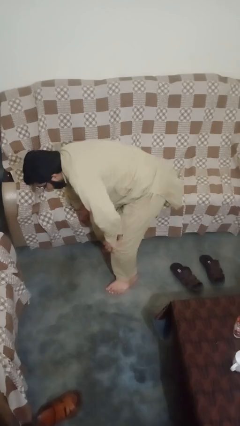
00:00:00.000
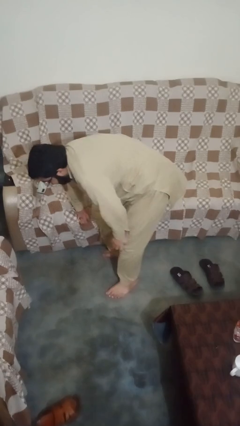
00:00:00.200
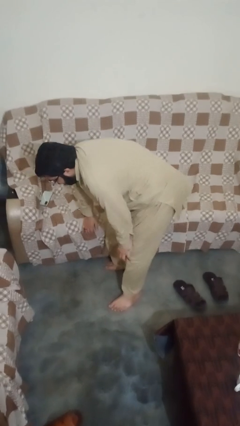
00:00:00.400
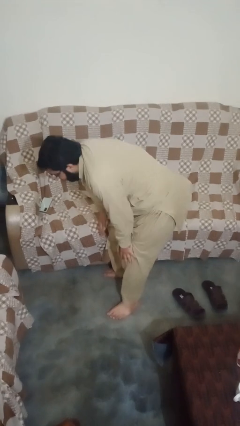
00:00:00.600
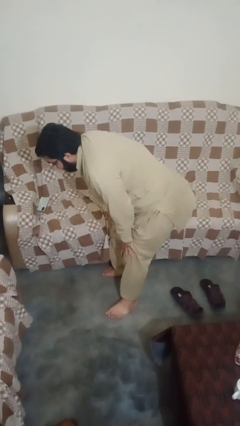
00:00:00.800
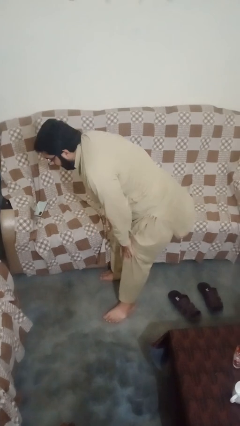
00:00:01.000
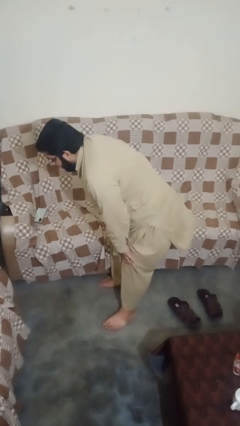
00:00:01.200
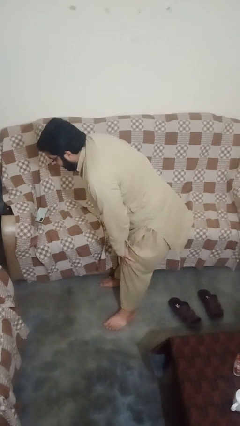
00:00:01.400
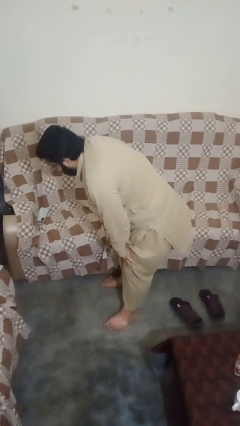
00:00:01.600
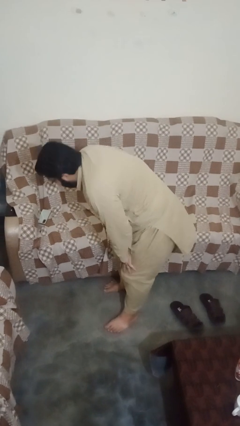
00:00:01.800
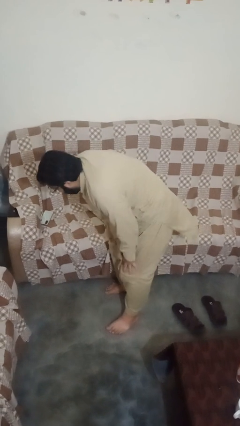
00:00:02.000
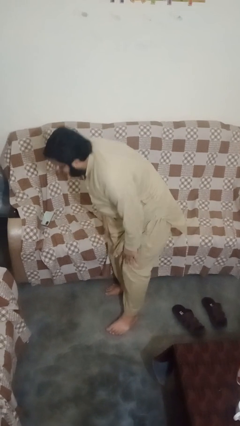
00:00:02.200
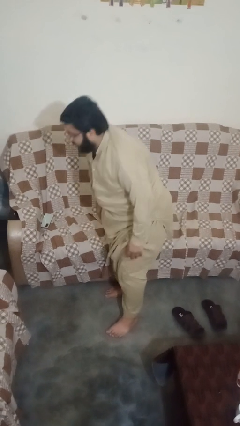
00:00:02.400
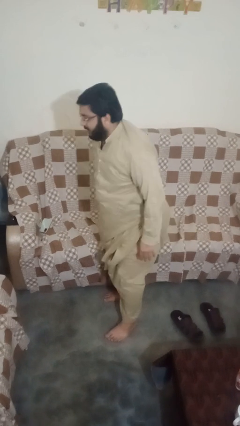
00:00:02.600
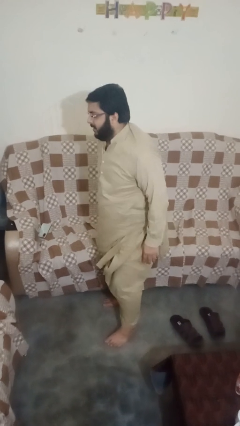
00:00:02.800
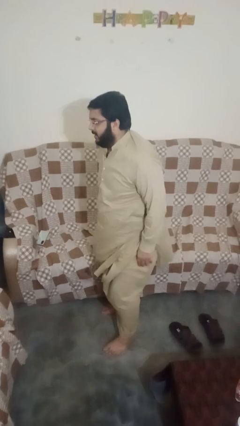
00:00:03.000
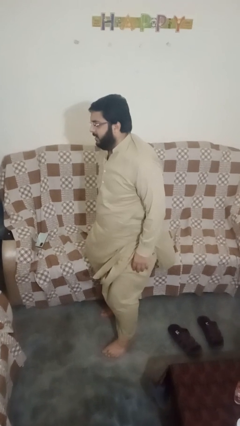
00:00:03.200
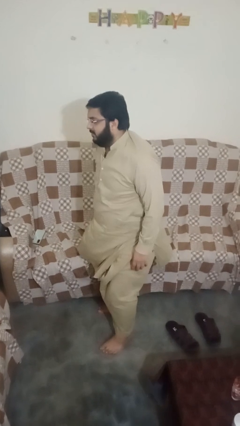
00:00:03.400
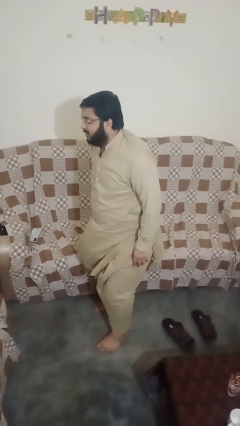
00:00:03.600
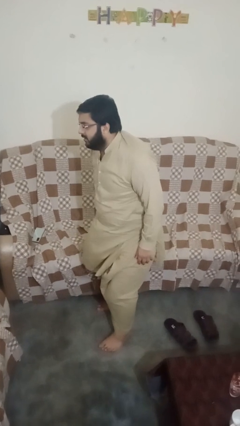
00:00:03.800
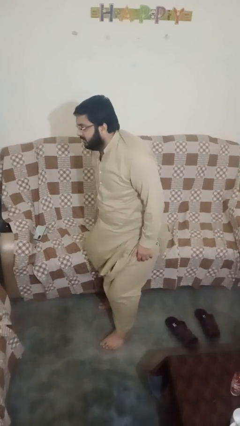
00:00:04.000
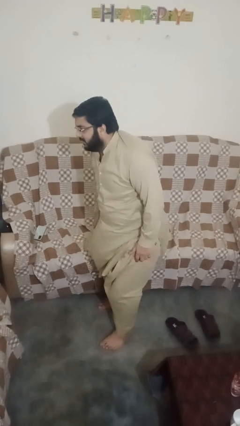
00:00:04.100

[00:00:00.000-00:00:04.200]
person stands up from floor

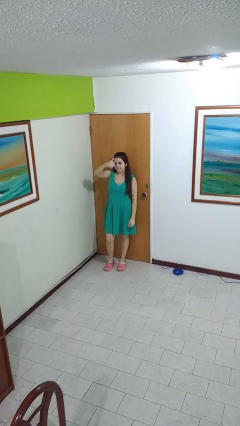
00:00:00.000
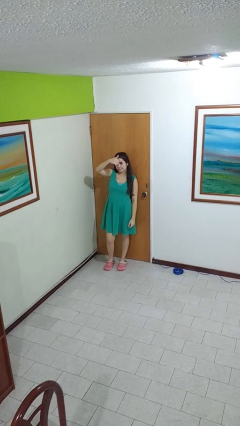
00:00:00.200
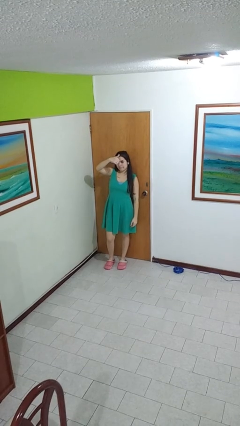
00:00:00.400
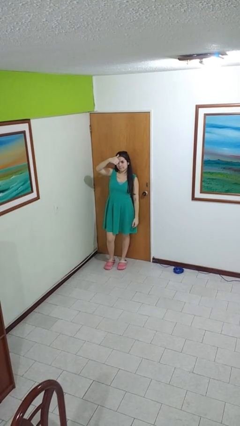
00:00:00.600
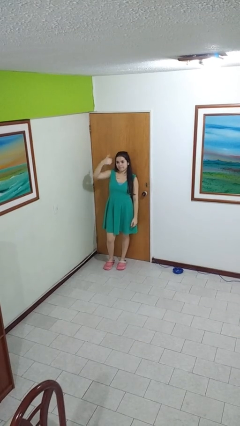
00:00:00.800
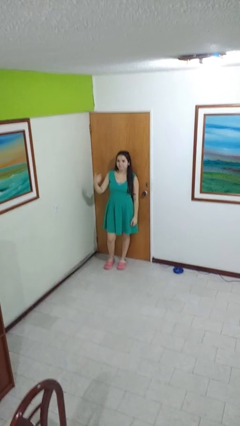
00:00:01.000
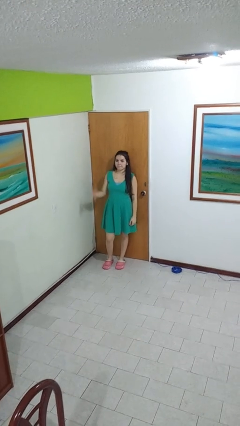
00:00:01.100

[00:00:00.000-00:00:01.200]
person gestures thumbs up

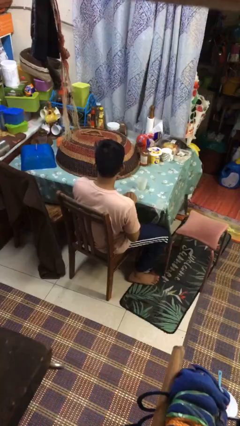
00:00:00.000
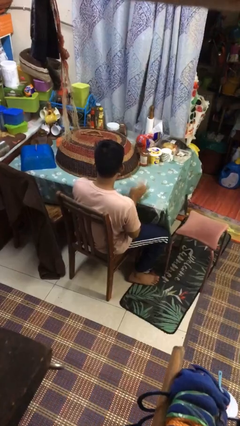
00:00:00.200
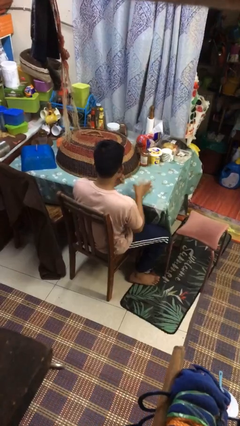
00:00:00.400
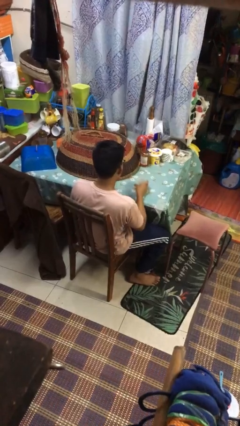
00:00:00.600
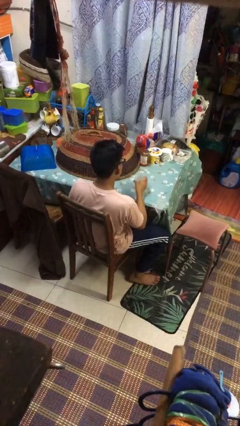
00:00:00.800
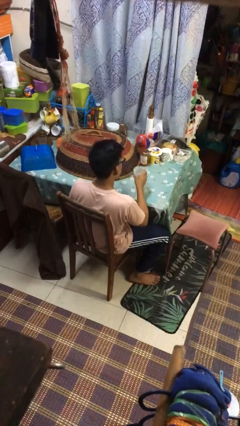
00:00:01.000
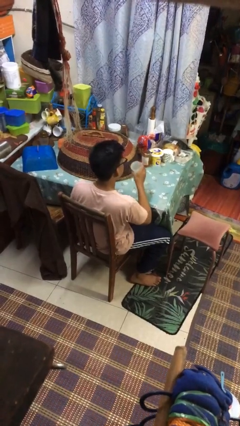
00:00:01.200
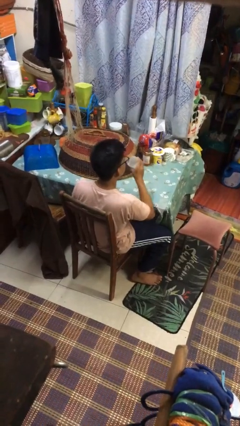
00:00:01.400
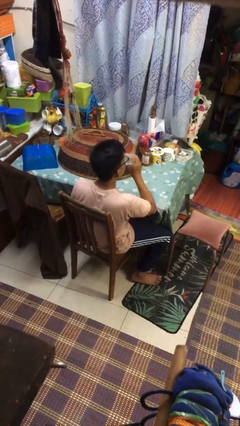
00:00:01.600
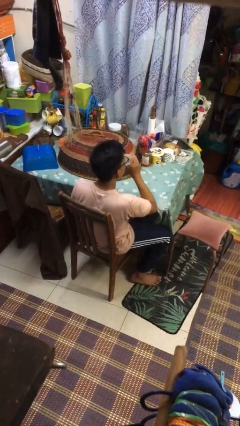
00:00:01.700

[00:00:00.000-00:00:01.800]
person picks up object from table

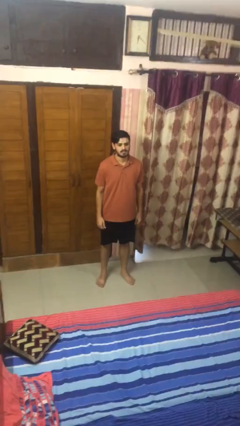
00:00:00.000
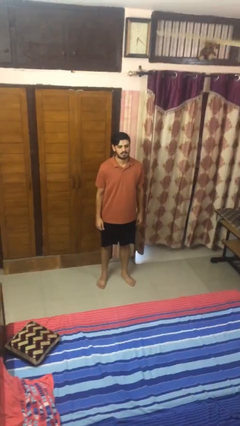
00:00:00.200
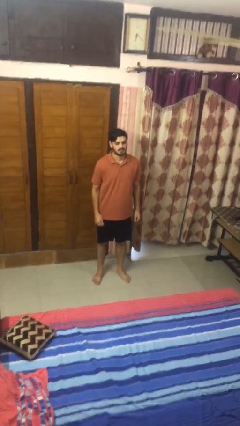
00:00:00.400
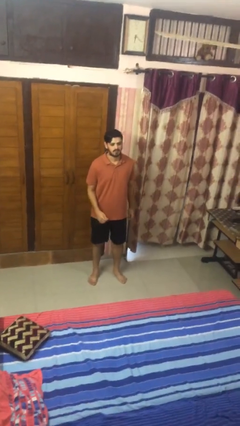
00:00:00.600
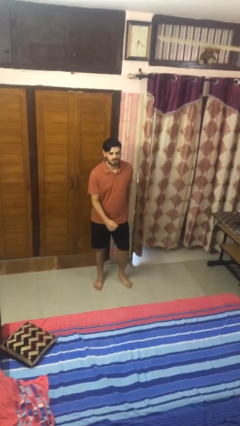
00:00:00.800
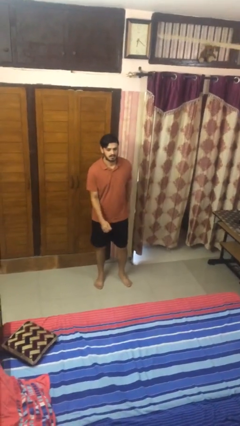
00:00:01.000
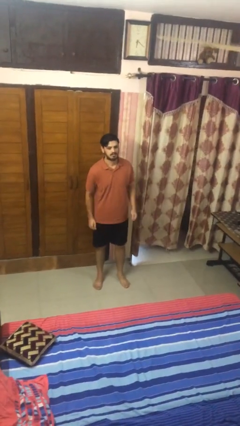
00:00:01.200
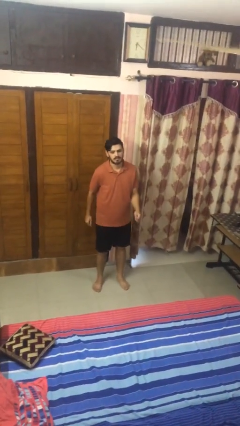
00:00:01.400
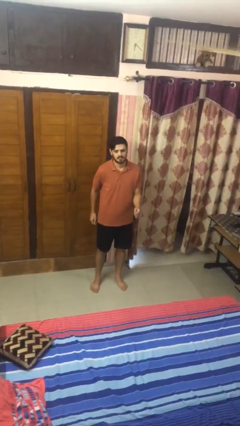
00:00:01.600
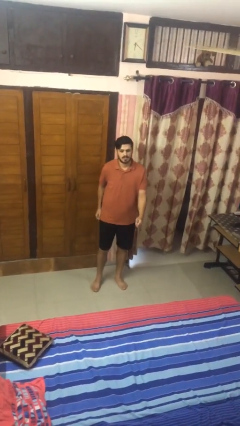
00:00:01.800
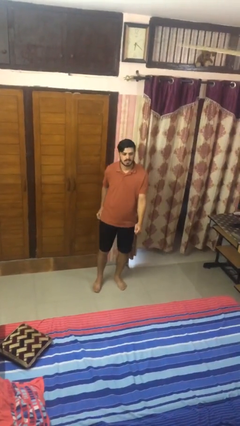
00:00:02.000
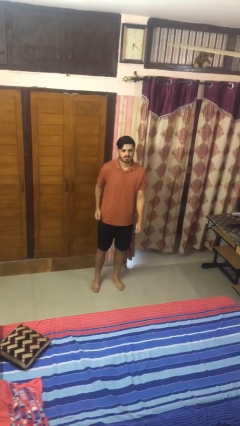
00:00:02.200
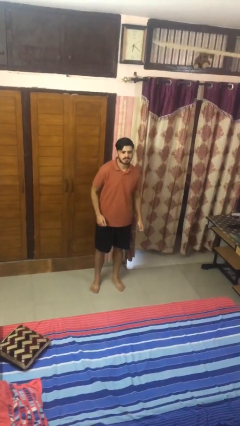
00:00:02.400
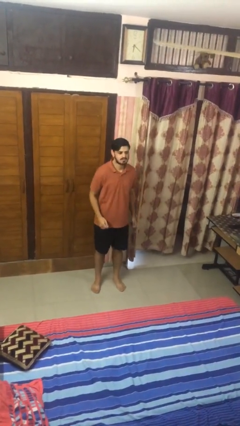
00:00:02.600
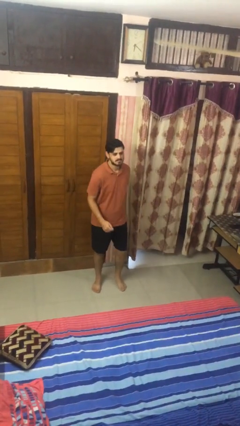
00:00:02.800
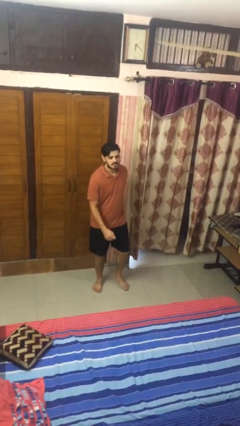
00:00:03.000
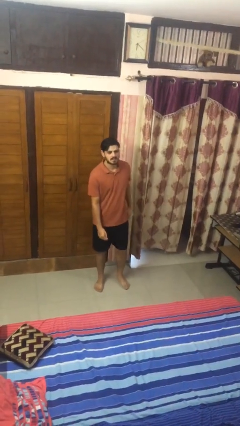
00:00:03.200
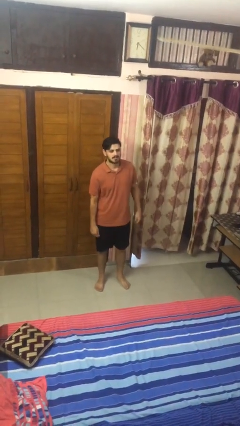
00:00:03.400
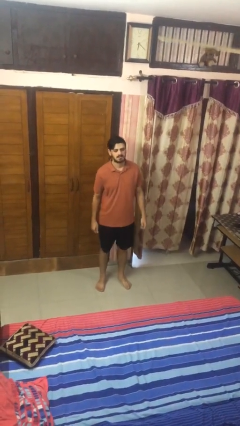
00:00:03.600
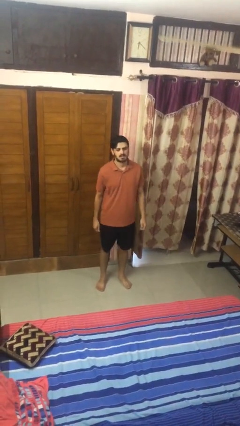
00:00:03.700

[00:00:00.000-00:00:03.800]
person dances in place

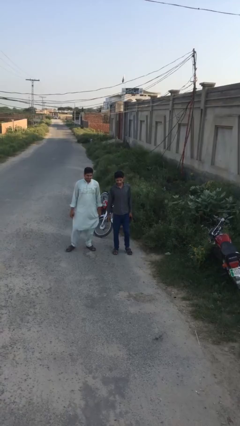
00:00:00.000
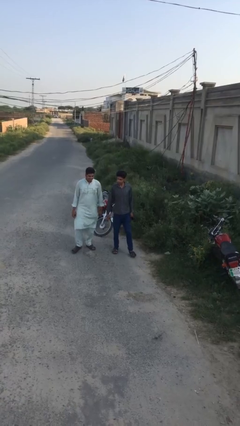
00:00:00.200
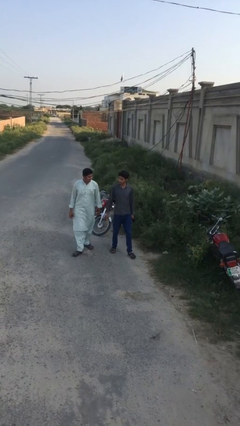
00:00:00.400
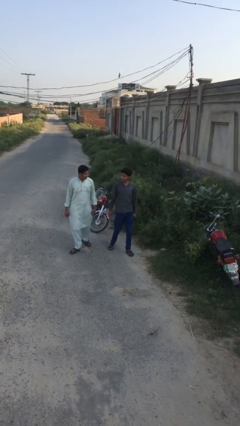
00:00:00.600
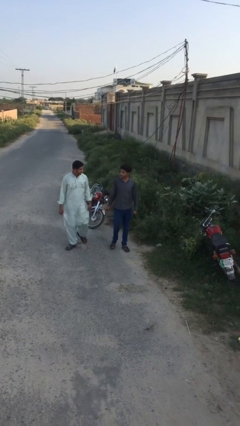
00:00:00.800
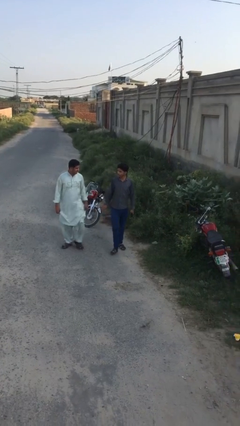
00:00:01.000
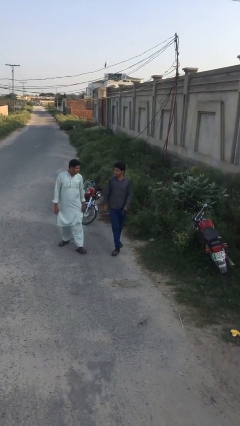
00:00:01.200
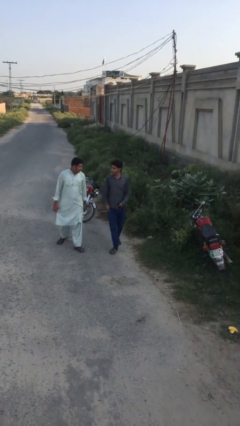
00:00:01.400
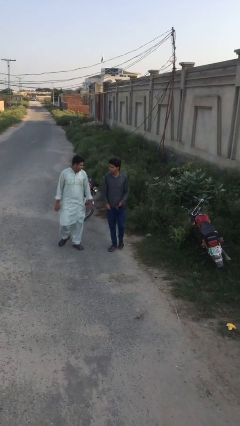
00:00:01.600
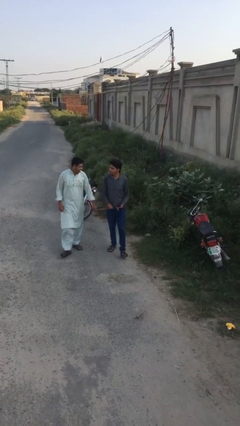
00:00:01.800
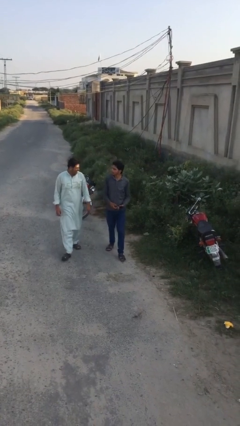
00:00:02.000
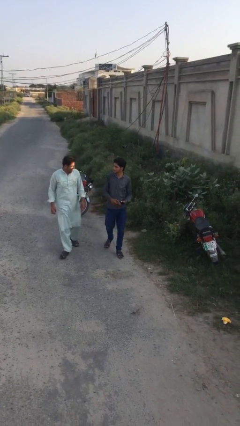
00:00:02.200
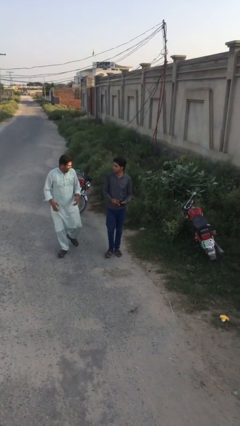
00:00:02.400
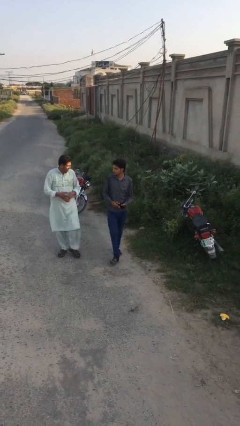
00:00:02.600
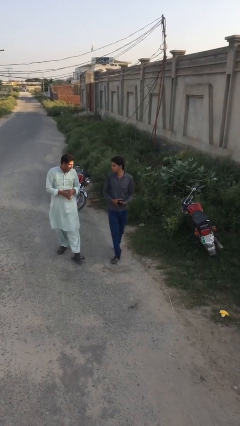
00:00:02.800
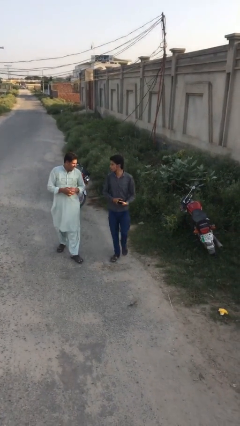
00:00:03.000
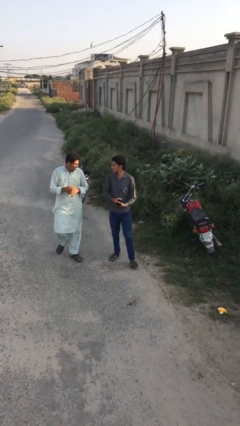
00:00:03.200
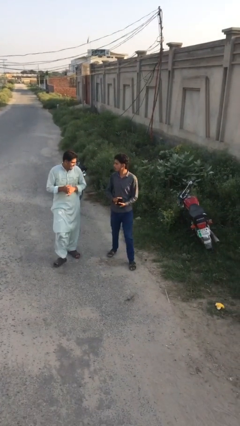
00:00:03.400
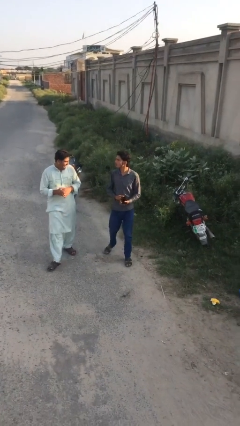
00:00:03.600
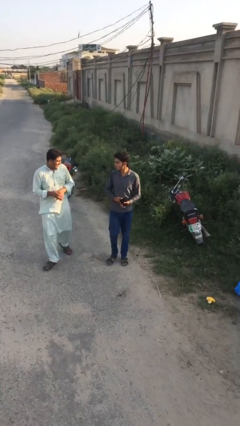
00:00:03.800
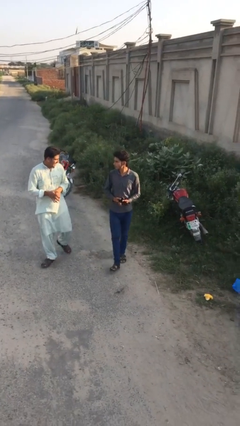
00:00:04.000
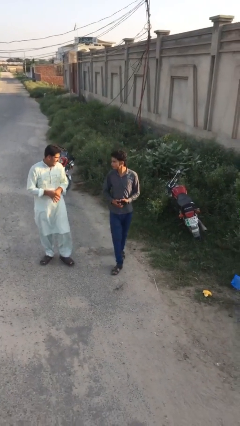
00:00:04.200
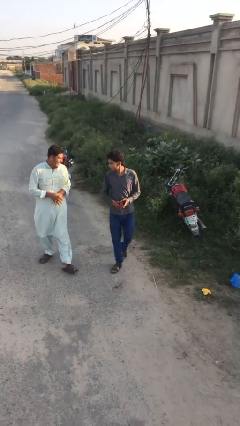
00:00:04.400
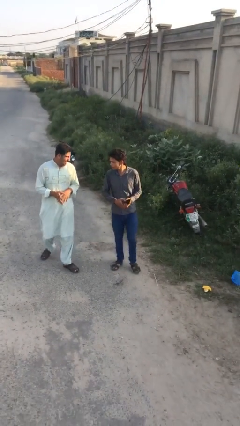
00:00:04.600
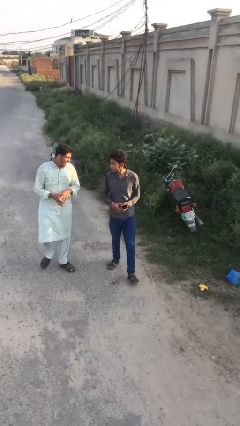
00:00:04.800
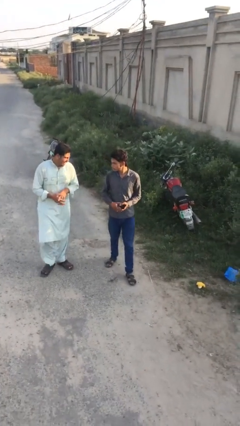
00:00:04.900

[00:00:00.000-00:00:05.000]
person talks to person

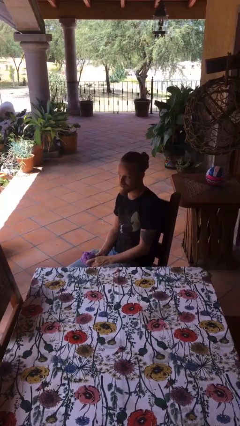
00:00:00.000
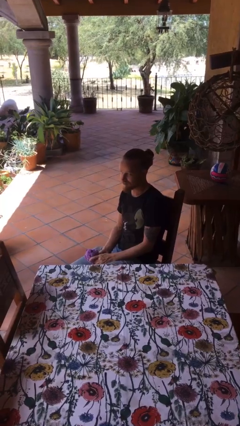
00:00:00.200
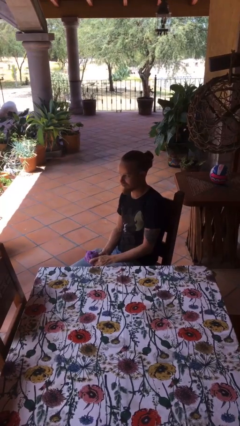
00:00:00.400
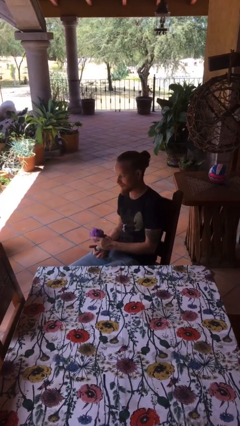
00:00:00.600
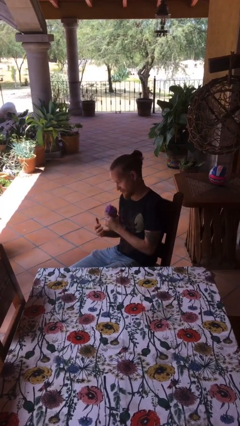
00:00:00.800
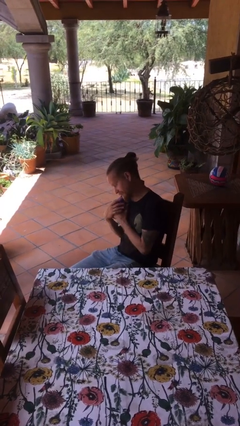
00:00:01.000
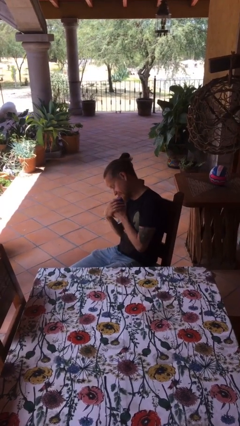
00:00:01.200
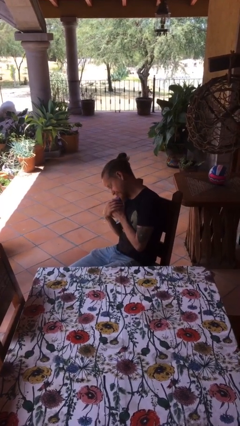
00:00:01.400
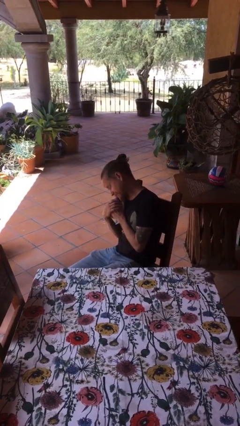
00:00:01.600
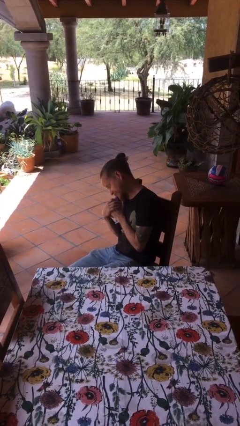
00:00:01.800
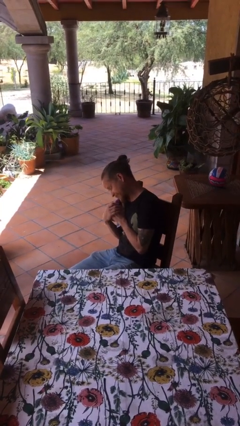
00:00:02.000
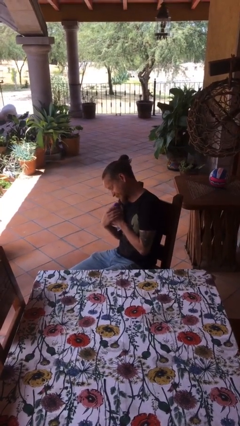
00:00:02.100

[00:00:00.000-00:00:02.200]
person hugs stuffed animal
